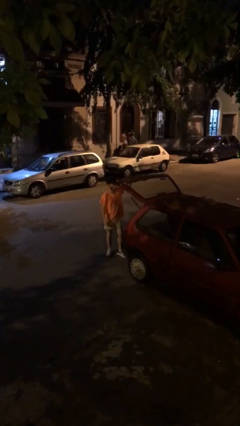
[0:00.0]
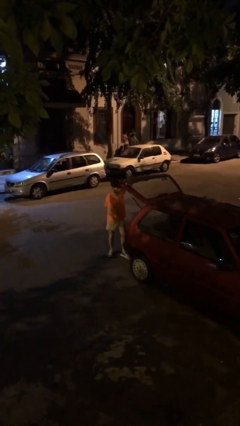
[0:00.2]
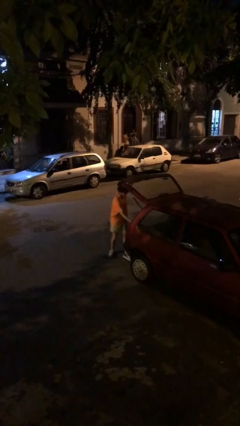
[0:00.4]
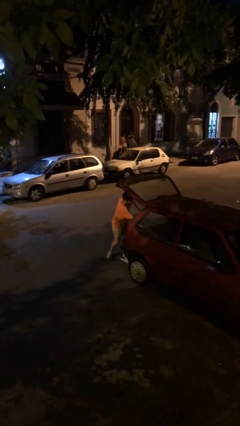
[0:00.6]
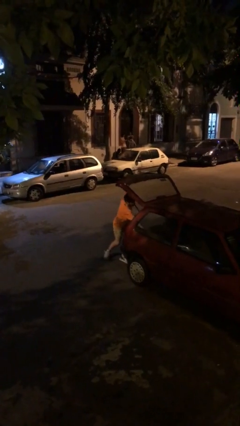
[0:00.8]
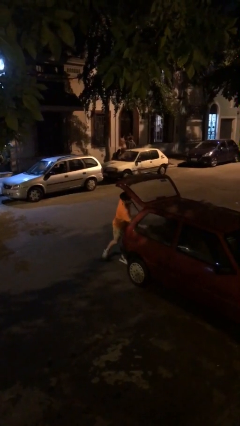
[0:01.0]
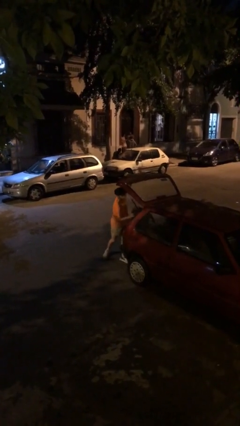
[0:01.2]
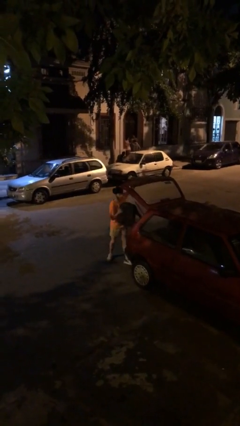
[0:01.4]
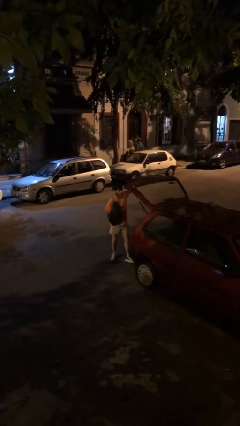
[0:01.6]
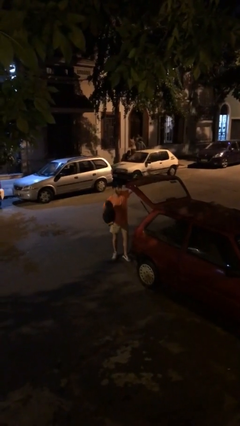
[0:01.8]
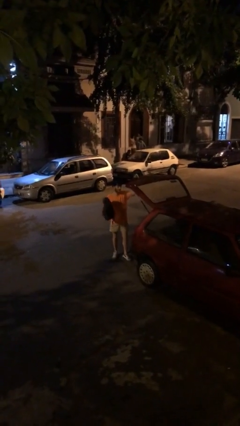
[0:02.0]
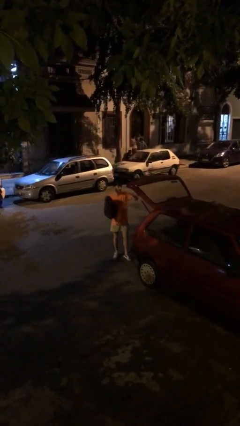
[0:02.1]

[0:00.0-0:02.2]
person unloads car

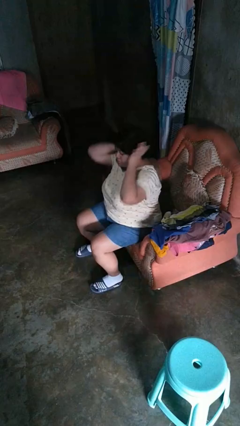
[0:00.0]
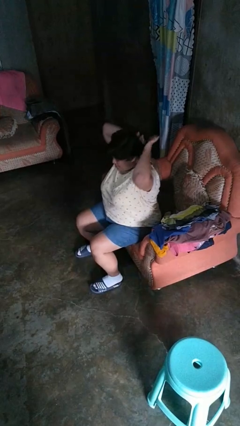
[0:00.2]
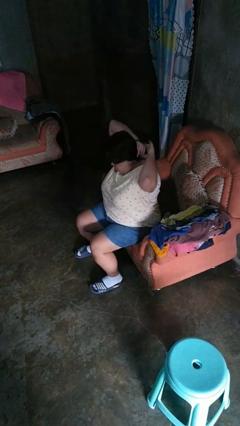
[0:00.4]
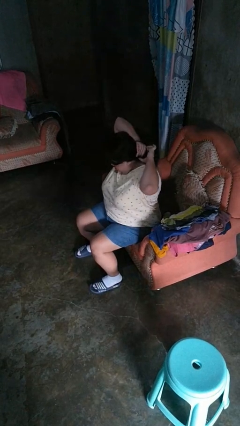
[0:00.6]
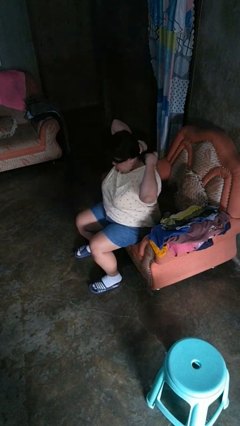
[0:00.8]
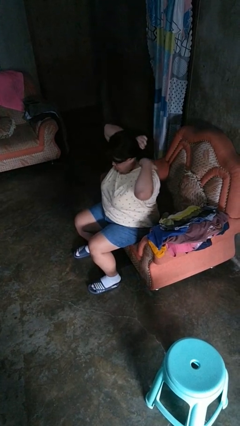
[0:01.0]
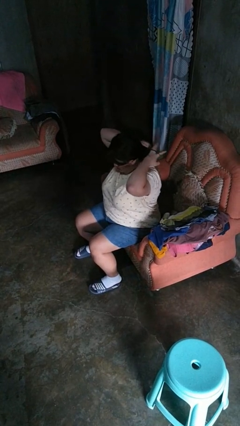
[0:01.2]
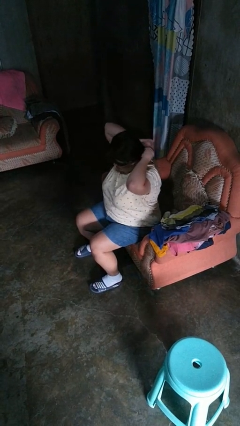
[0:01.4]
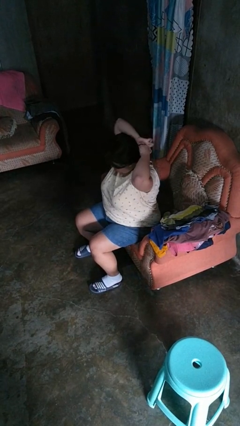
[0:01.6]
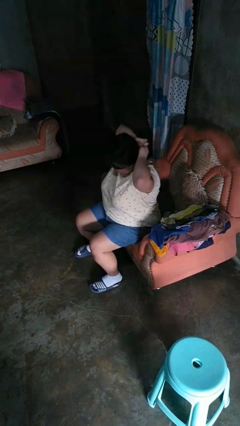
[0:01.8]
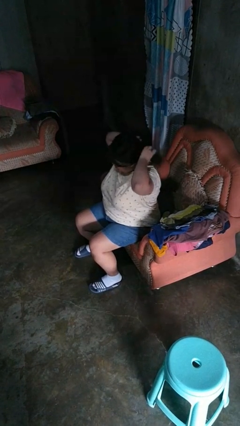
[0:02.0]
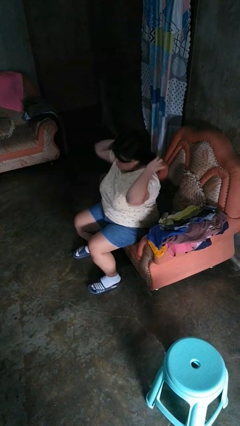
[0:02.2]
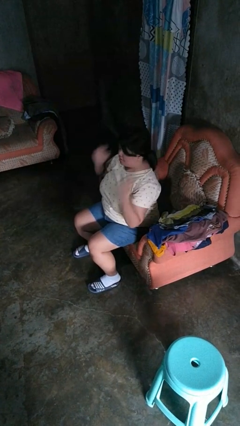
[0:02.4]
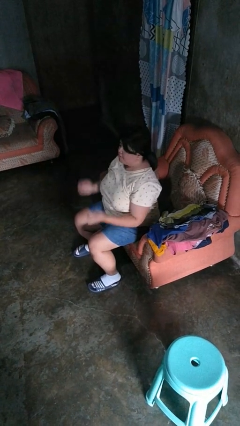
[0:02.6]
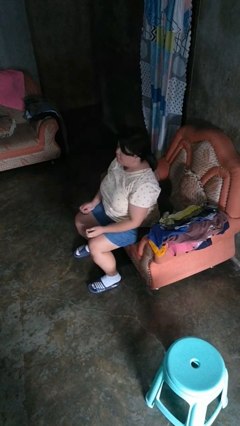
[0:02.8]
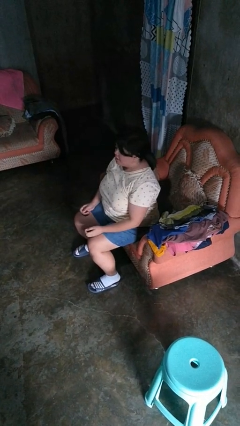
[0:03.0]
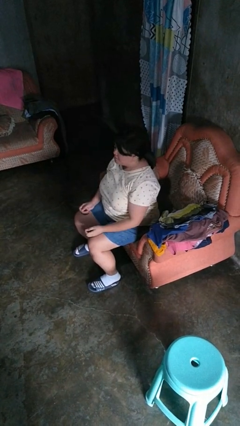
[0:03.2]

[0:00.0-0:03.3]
person puts hair in ponytail

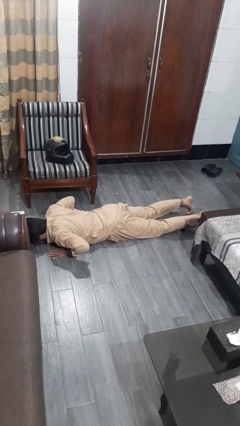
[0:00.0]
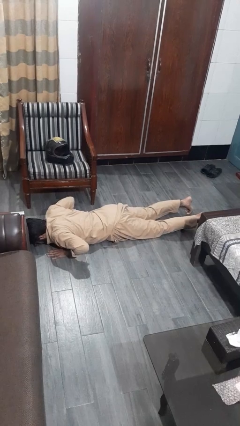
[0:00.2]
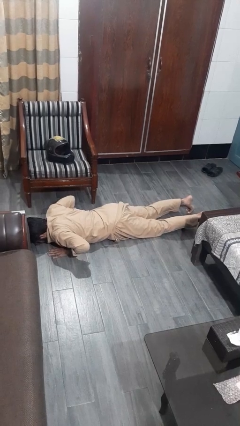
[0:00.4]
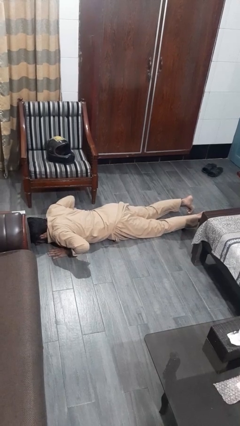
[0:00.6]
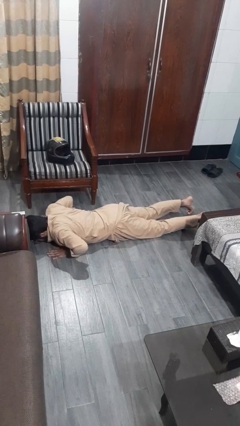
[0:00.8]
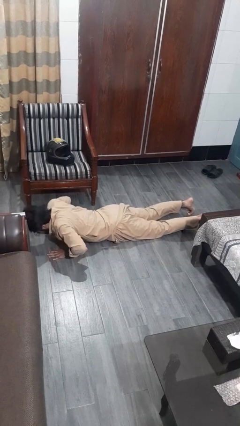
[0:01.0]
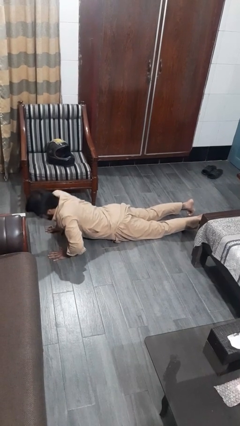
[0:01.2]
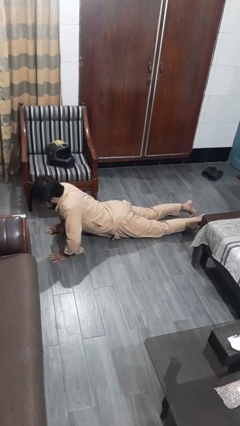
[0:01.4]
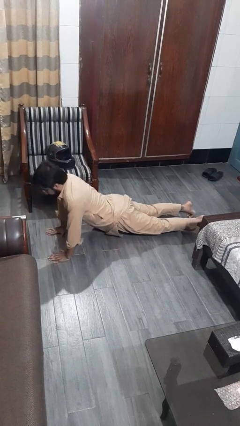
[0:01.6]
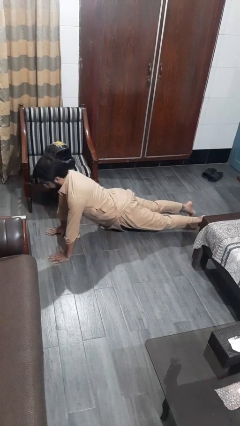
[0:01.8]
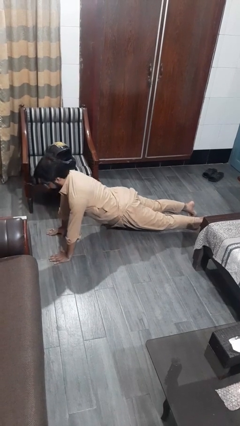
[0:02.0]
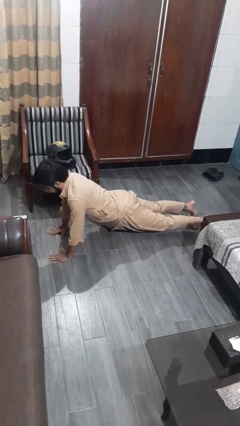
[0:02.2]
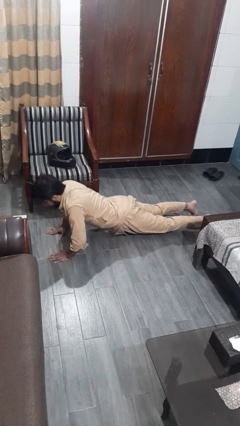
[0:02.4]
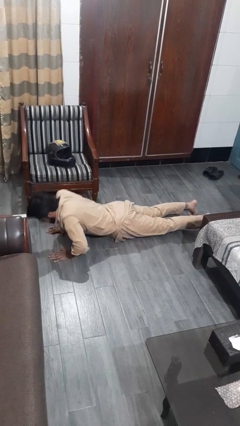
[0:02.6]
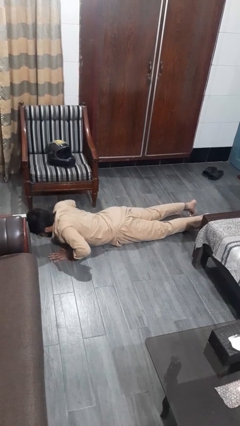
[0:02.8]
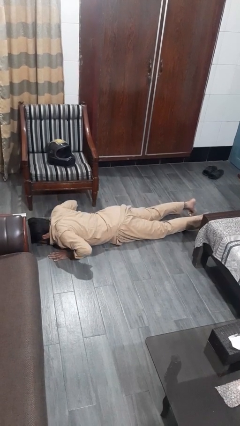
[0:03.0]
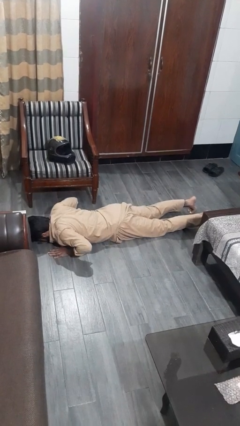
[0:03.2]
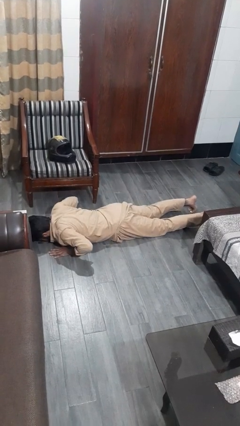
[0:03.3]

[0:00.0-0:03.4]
person exercises with pushup

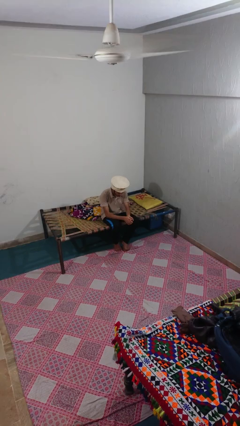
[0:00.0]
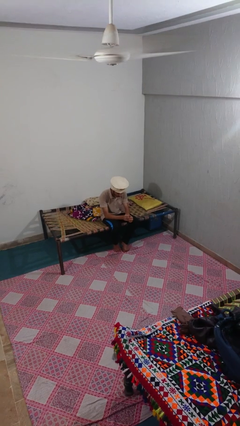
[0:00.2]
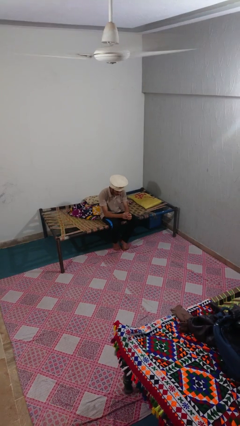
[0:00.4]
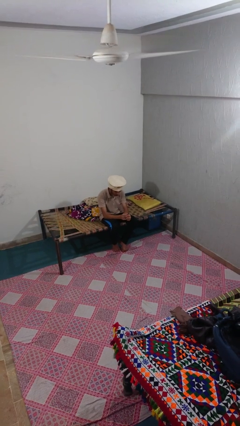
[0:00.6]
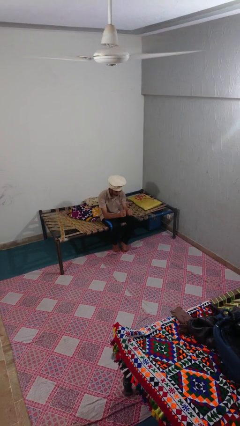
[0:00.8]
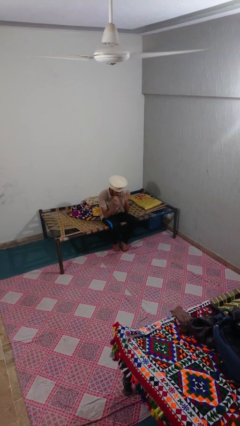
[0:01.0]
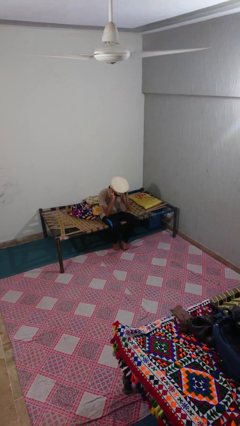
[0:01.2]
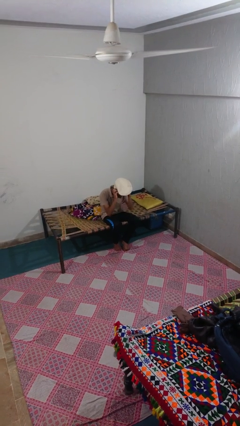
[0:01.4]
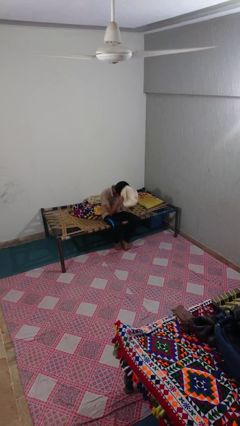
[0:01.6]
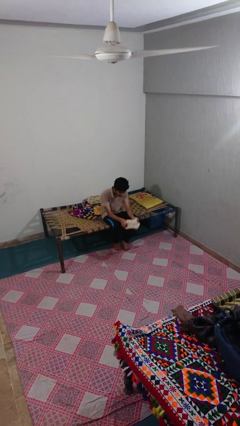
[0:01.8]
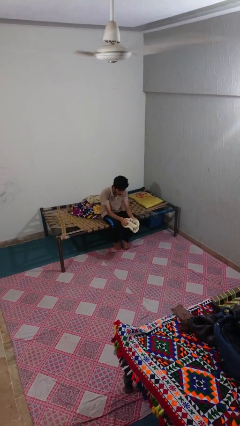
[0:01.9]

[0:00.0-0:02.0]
person takes off hat

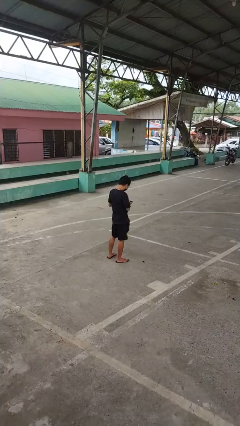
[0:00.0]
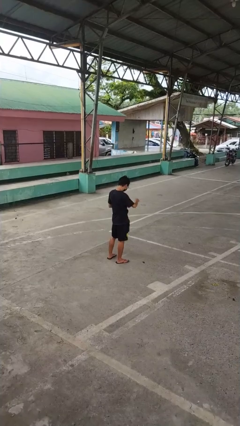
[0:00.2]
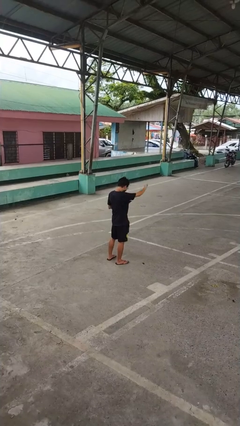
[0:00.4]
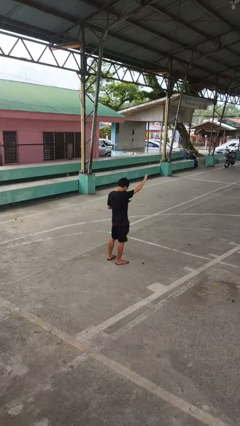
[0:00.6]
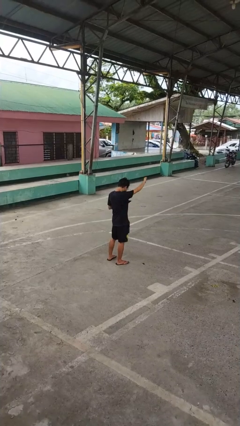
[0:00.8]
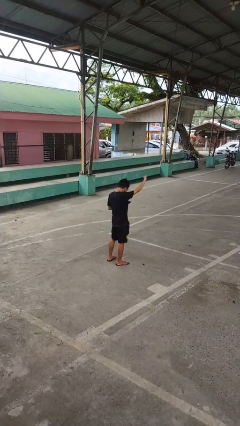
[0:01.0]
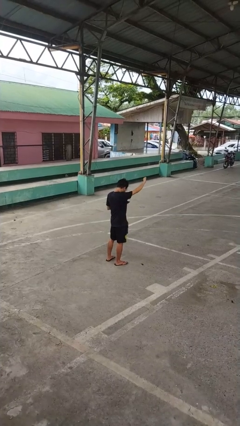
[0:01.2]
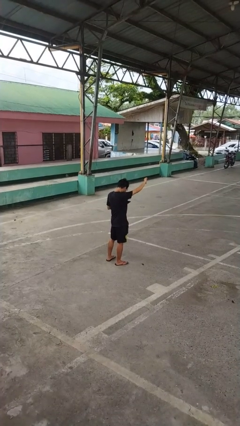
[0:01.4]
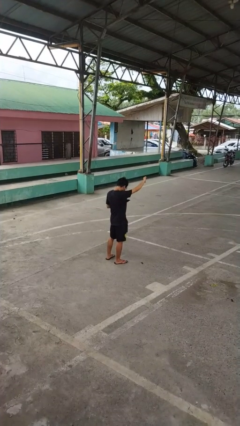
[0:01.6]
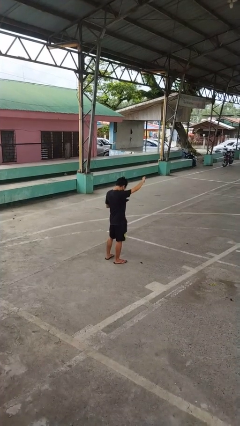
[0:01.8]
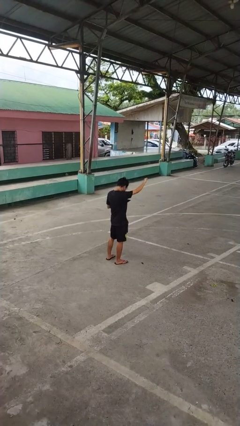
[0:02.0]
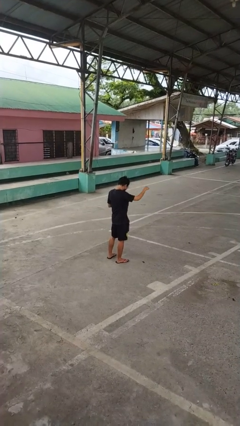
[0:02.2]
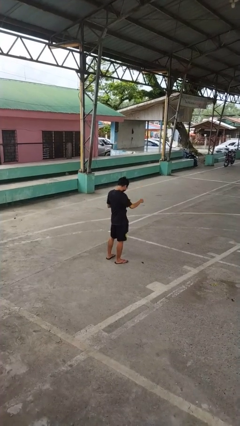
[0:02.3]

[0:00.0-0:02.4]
person gestures thumbs down

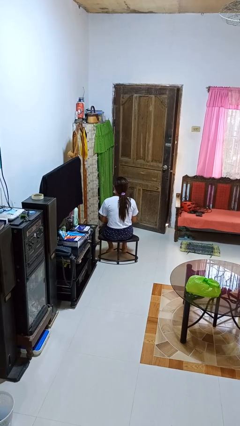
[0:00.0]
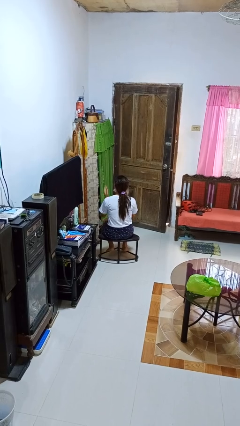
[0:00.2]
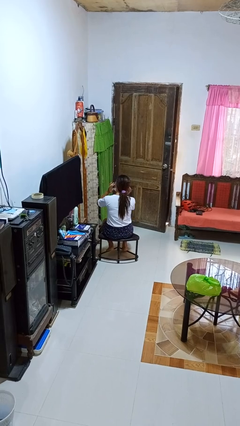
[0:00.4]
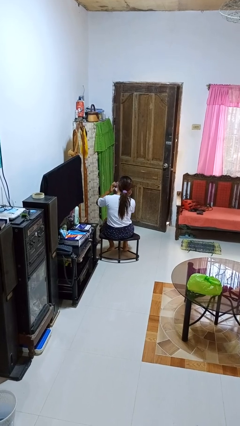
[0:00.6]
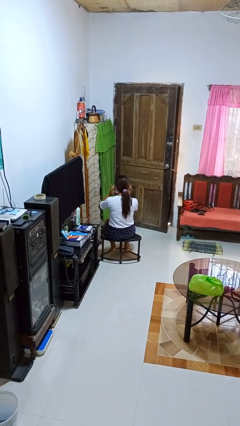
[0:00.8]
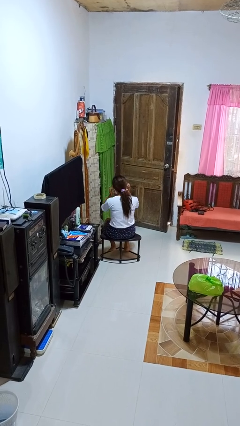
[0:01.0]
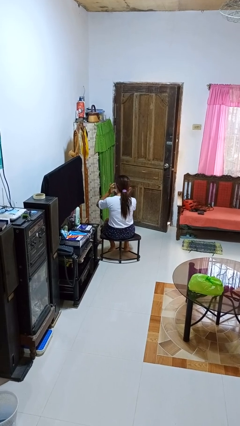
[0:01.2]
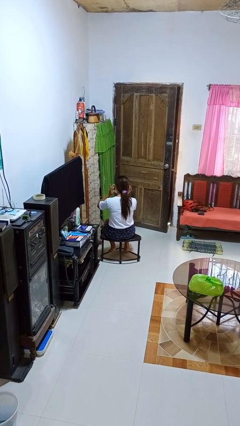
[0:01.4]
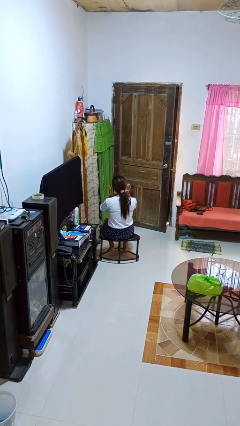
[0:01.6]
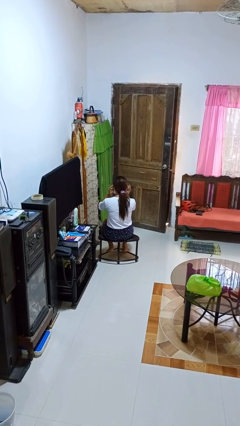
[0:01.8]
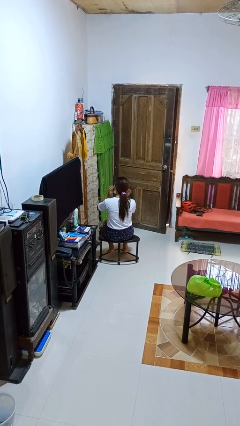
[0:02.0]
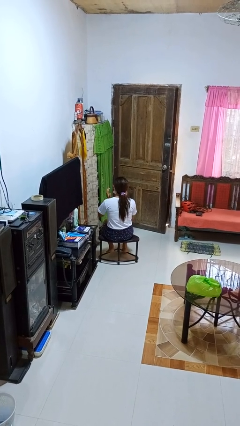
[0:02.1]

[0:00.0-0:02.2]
person puts fingers in ear

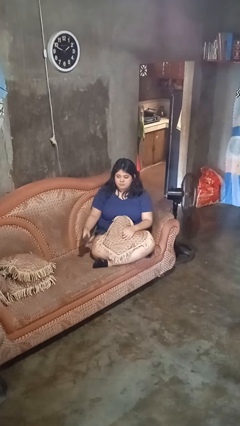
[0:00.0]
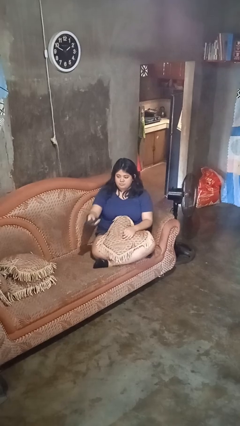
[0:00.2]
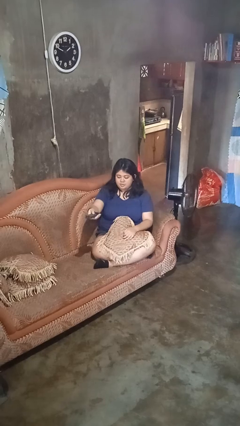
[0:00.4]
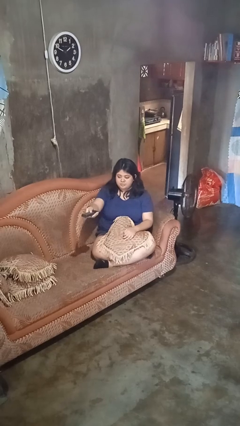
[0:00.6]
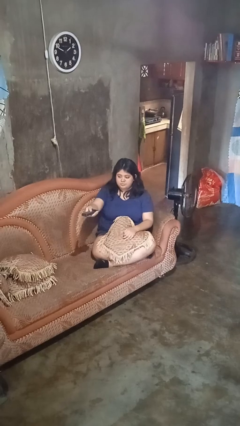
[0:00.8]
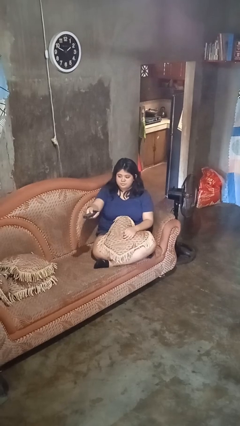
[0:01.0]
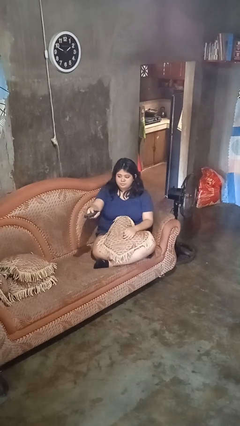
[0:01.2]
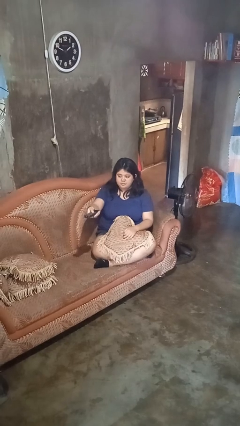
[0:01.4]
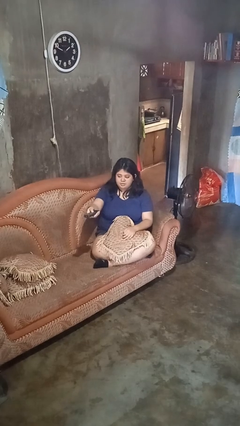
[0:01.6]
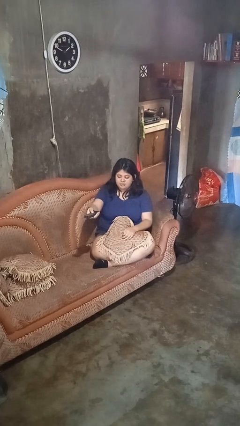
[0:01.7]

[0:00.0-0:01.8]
person uses television remote
